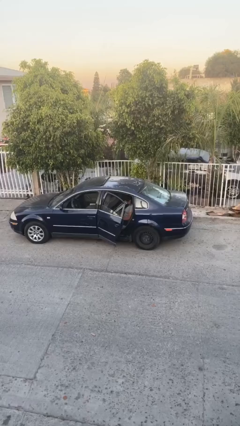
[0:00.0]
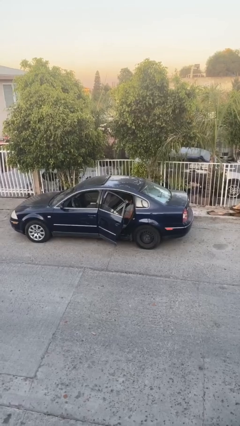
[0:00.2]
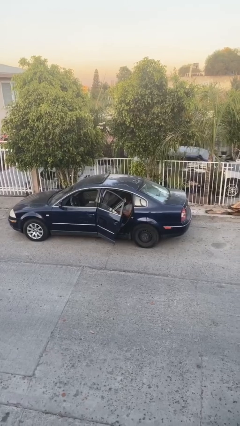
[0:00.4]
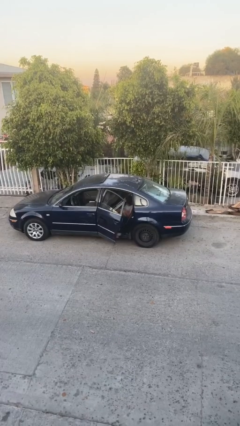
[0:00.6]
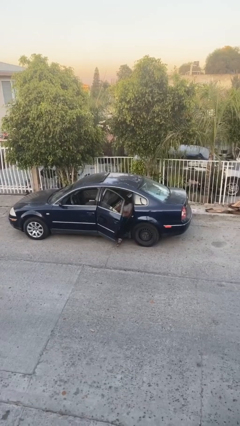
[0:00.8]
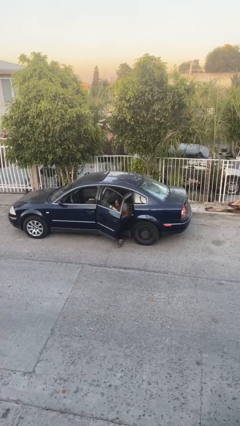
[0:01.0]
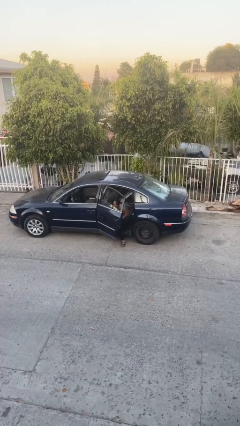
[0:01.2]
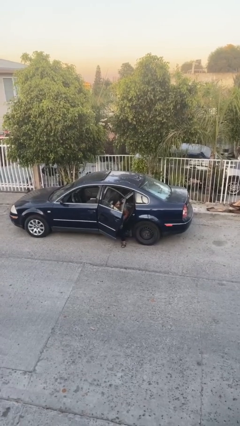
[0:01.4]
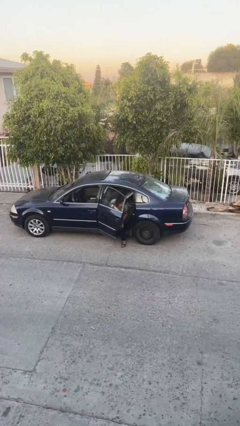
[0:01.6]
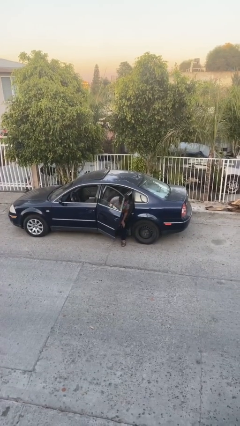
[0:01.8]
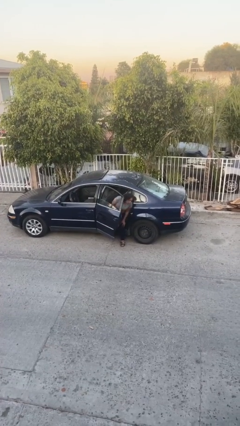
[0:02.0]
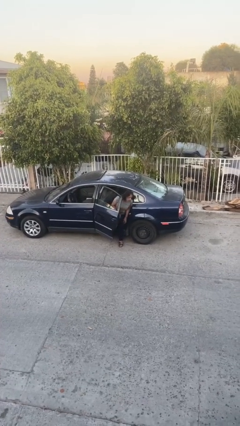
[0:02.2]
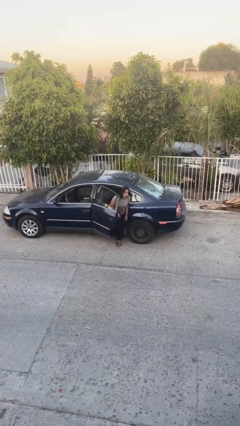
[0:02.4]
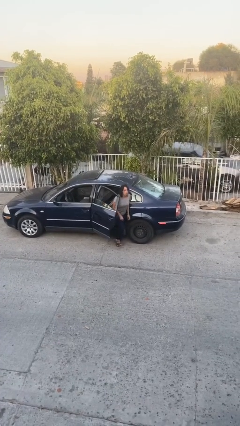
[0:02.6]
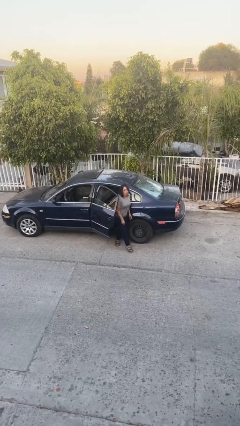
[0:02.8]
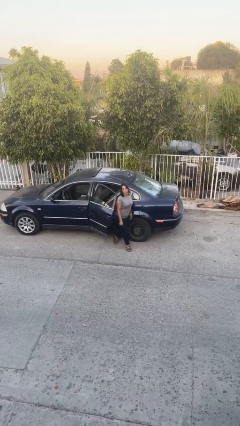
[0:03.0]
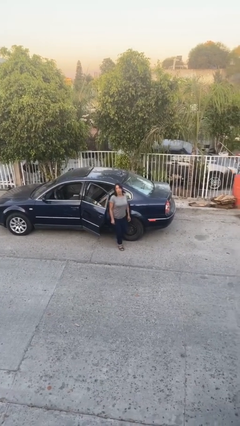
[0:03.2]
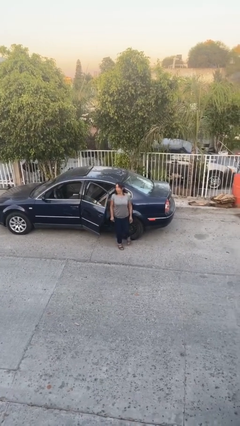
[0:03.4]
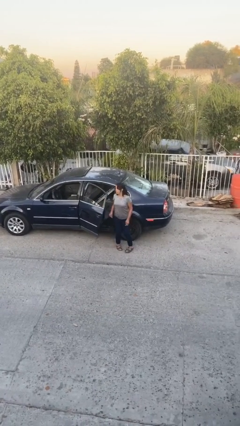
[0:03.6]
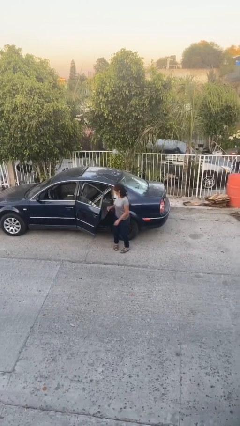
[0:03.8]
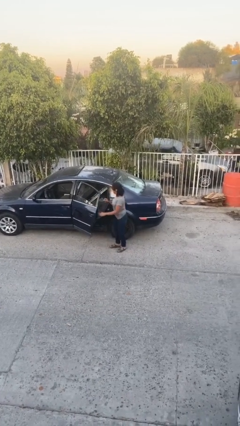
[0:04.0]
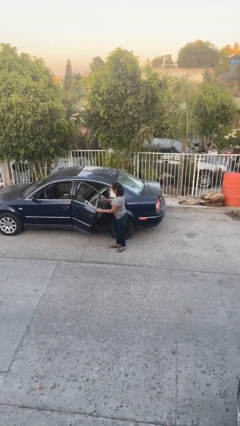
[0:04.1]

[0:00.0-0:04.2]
person exits car

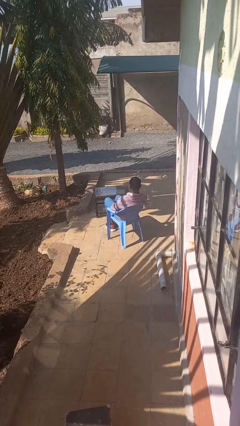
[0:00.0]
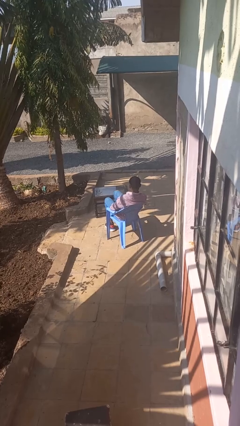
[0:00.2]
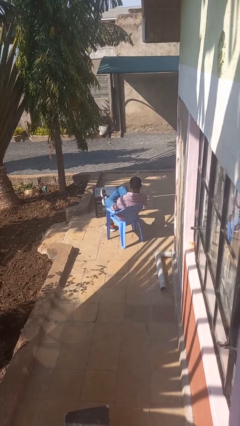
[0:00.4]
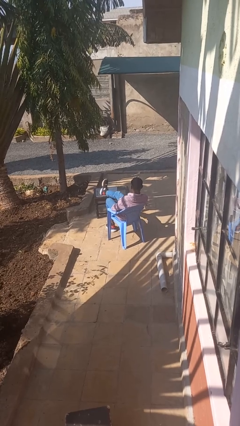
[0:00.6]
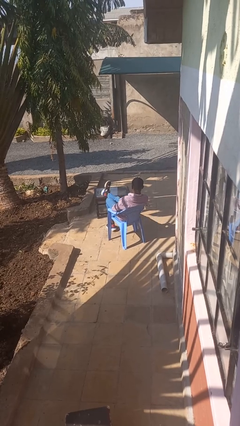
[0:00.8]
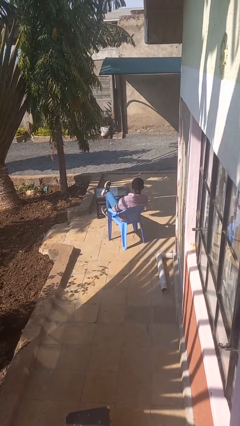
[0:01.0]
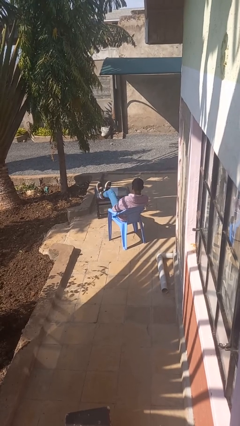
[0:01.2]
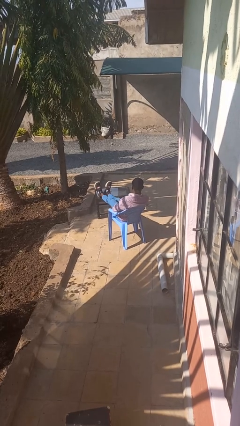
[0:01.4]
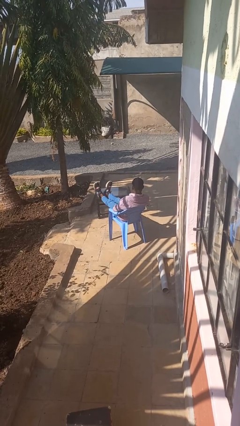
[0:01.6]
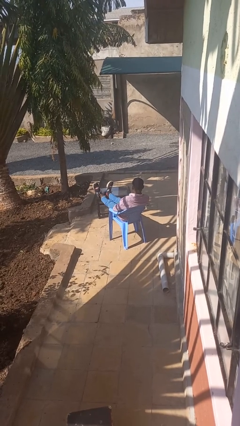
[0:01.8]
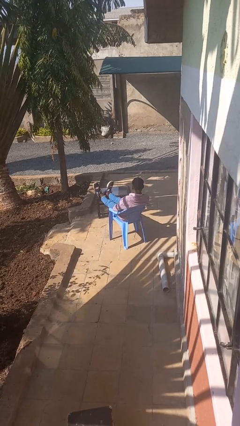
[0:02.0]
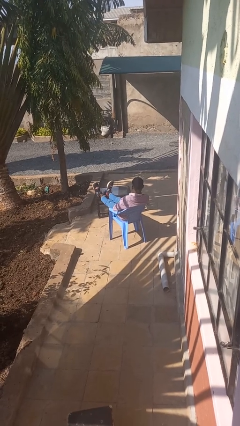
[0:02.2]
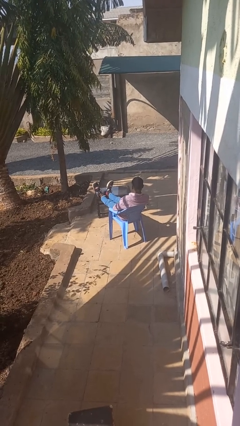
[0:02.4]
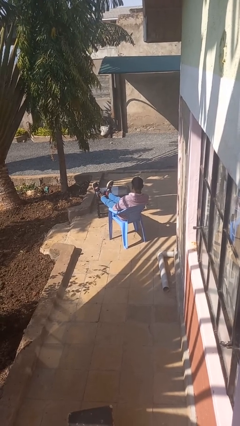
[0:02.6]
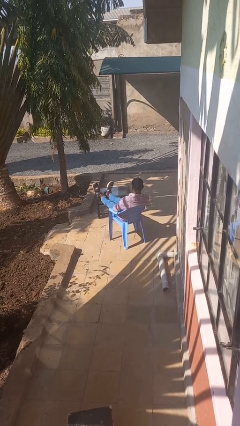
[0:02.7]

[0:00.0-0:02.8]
person puts feet up

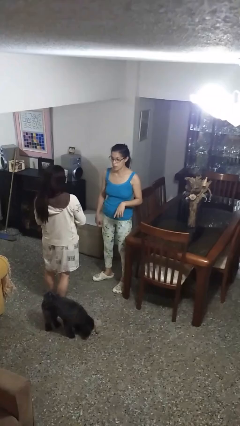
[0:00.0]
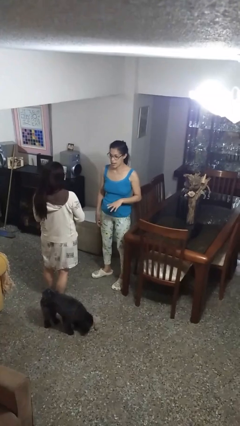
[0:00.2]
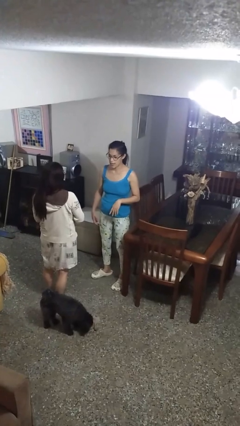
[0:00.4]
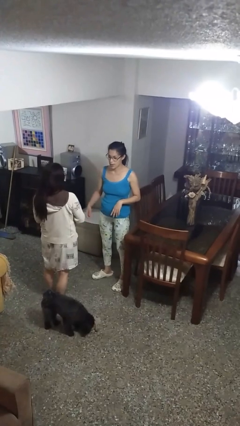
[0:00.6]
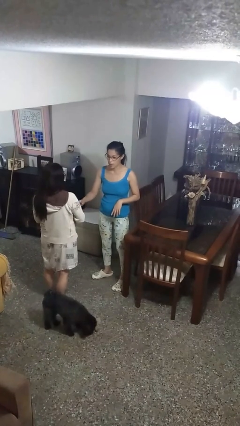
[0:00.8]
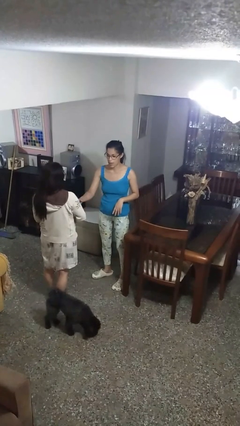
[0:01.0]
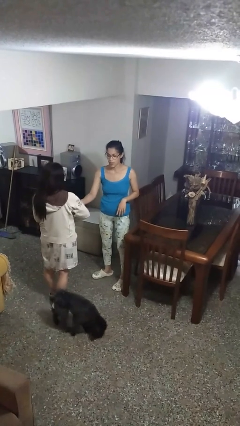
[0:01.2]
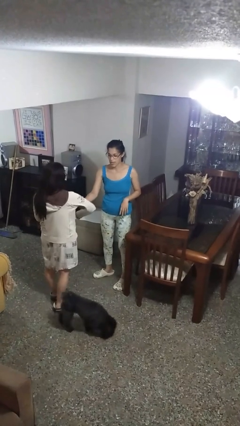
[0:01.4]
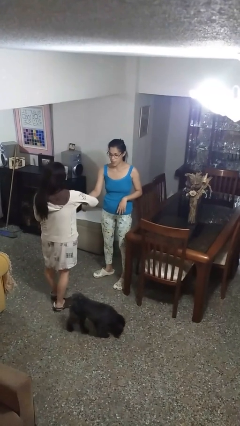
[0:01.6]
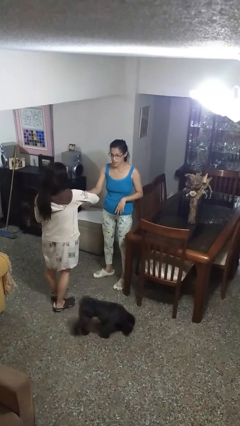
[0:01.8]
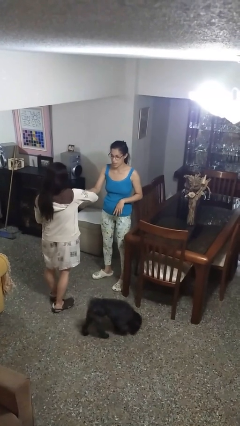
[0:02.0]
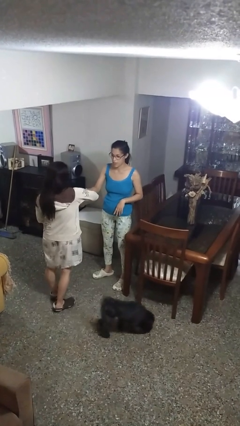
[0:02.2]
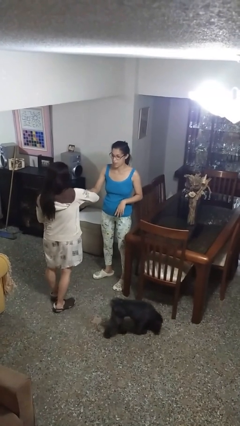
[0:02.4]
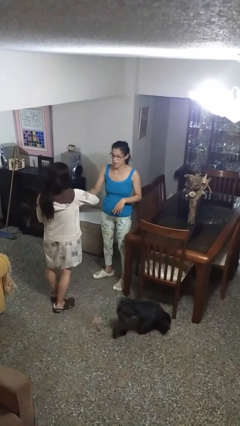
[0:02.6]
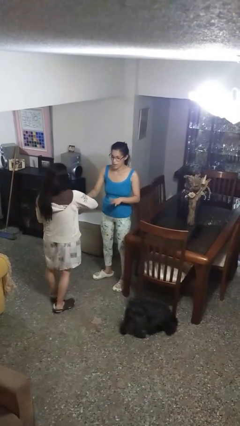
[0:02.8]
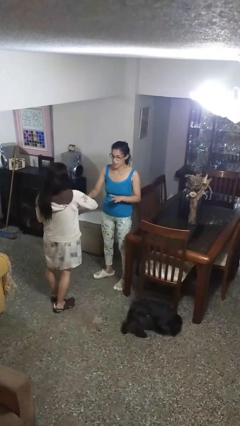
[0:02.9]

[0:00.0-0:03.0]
person grabs person by bicep

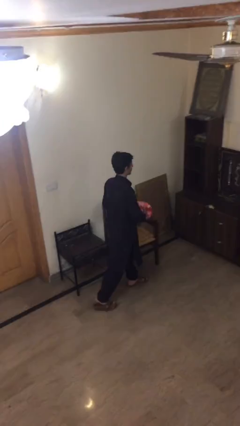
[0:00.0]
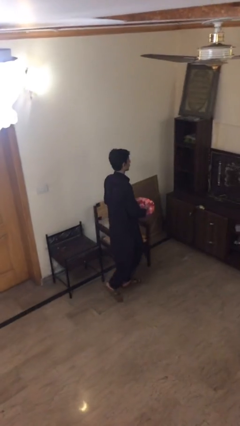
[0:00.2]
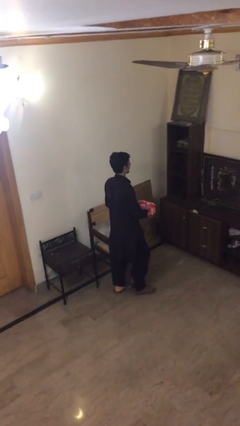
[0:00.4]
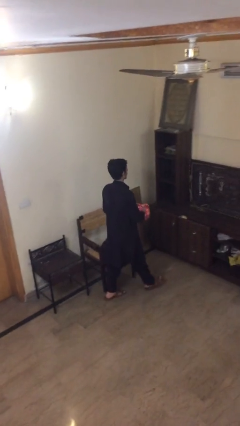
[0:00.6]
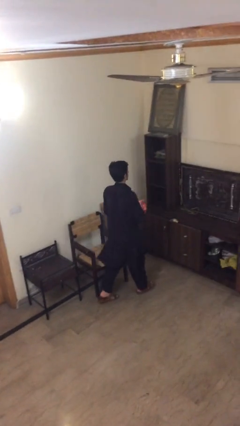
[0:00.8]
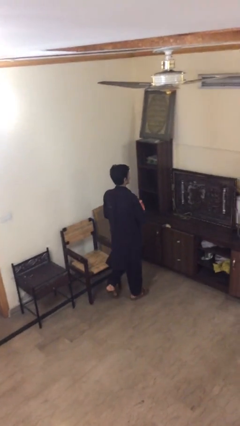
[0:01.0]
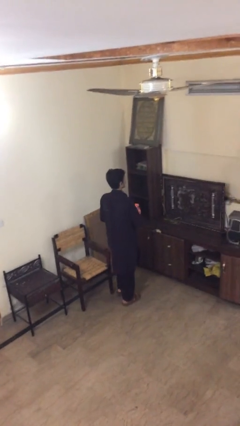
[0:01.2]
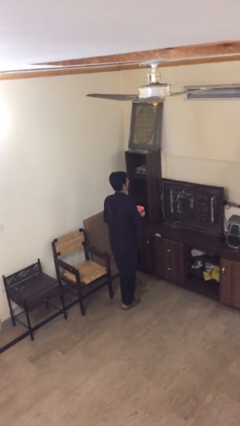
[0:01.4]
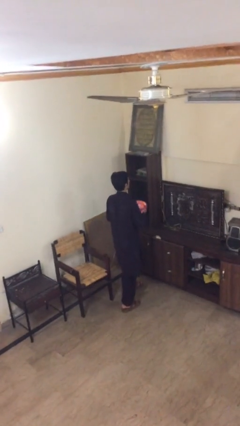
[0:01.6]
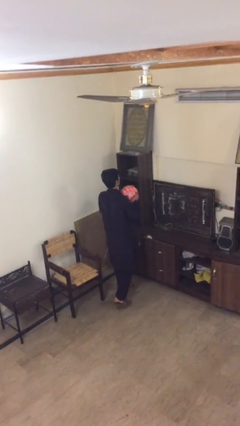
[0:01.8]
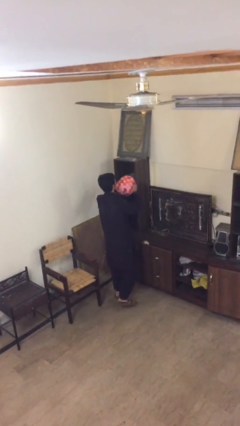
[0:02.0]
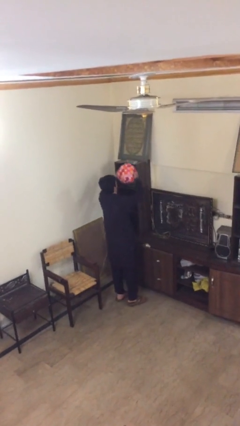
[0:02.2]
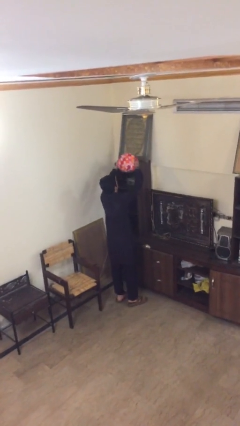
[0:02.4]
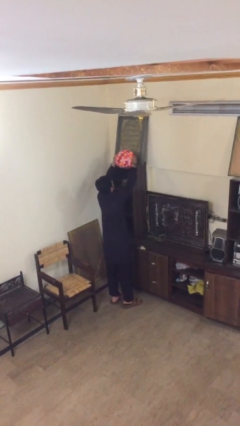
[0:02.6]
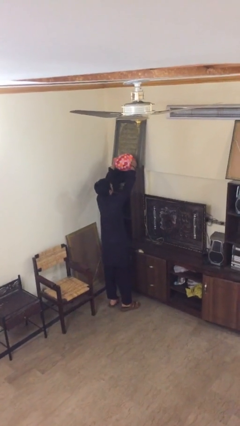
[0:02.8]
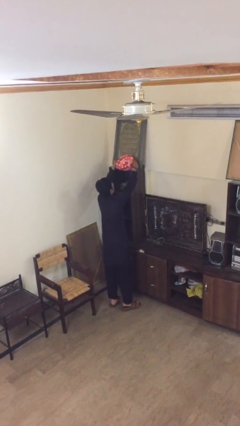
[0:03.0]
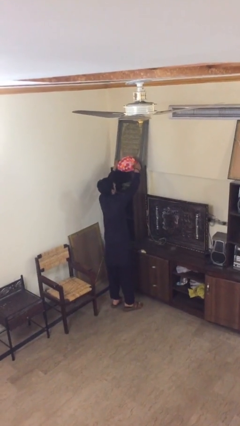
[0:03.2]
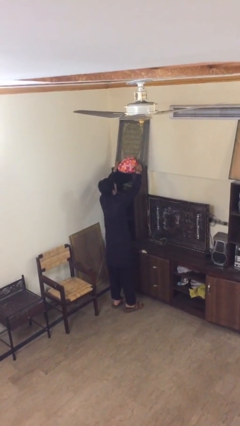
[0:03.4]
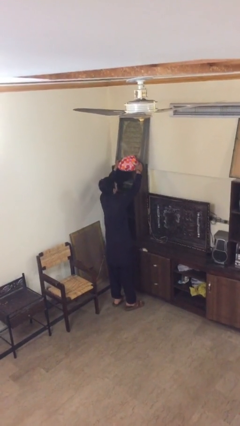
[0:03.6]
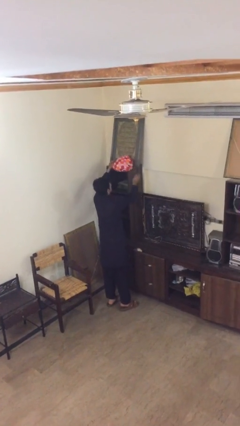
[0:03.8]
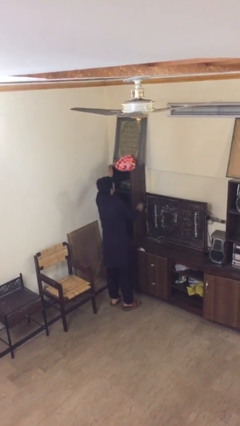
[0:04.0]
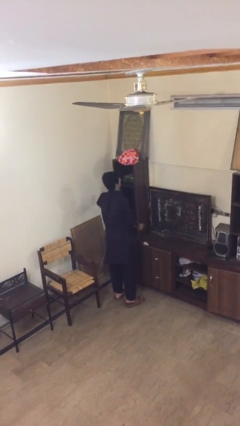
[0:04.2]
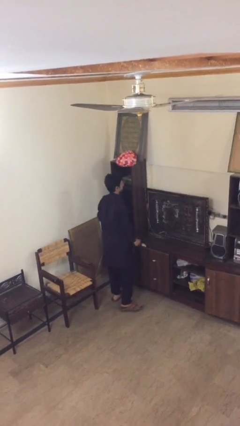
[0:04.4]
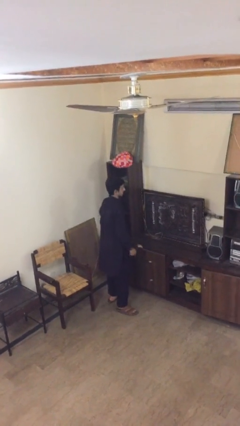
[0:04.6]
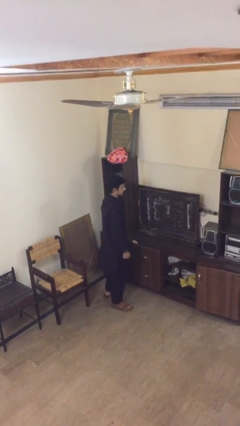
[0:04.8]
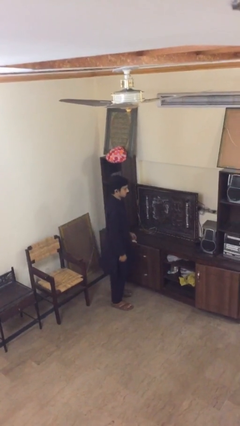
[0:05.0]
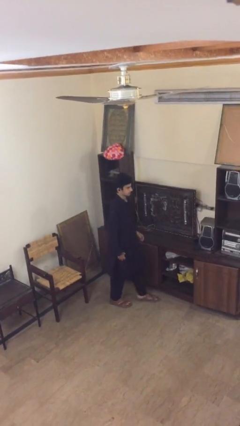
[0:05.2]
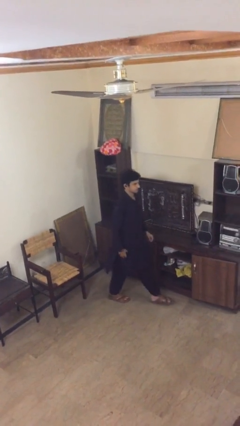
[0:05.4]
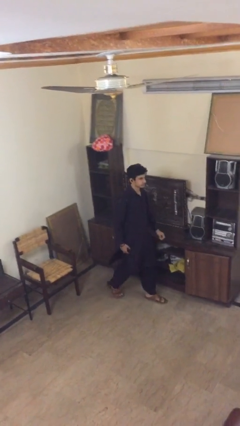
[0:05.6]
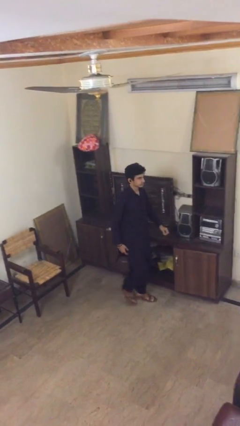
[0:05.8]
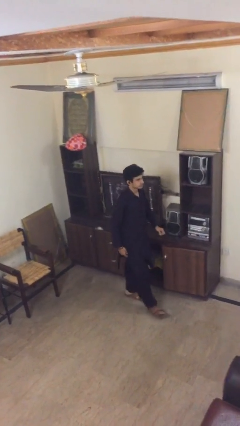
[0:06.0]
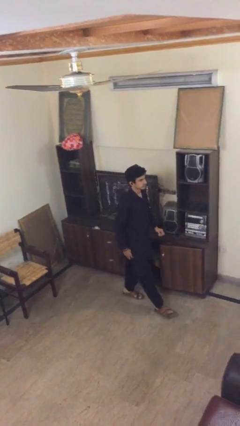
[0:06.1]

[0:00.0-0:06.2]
person puts down object on shelf

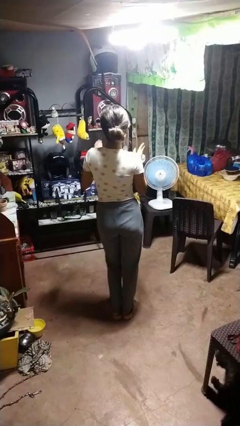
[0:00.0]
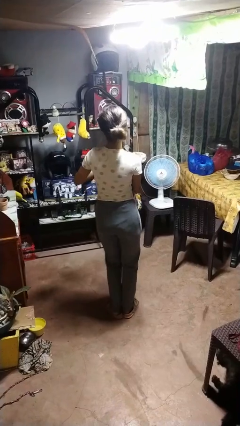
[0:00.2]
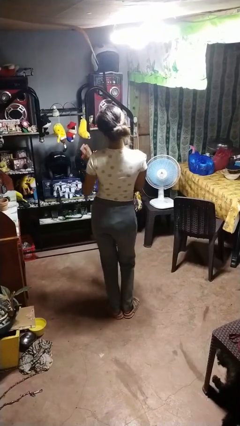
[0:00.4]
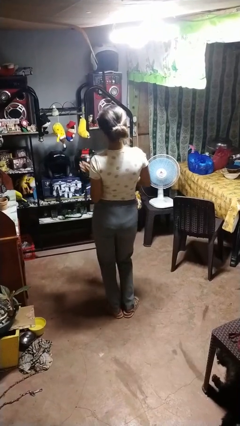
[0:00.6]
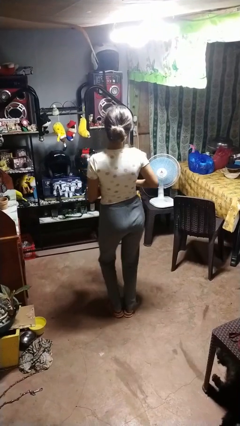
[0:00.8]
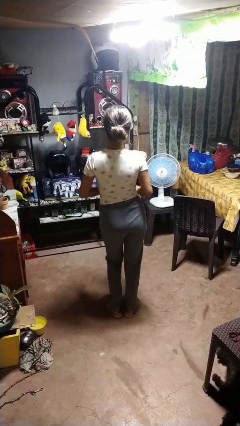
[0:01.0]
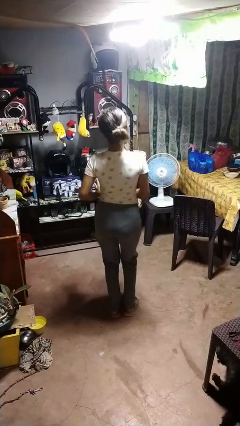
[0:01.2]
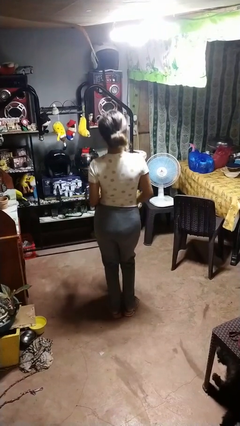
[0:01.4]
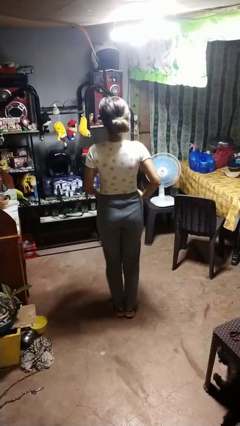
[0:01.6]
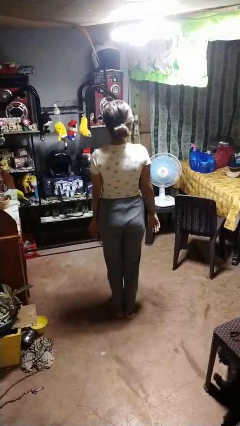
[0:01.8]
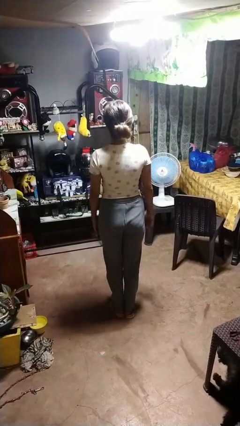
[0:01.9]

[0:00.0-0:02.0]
person dances in place
